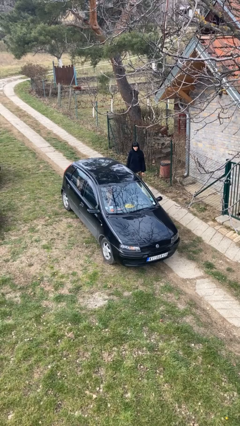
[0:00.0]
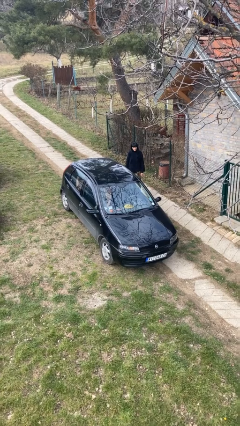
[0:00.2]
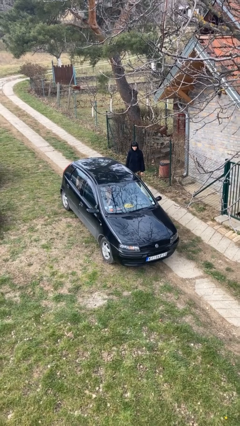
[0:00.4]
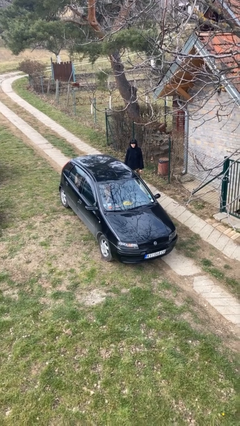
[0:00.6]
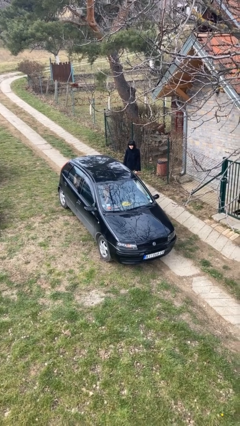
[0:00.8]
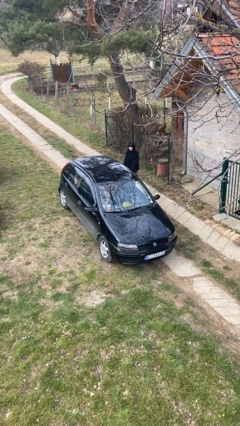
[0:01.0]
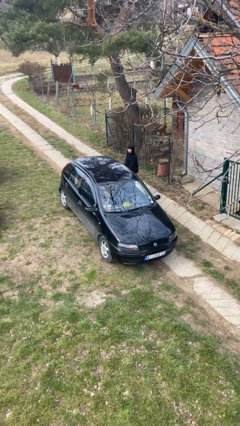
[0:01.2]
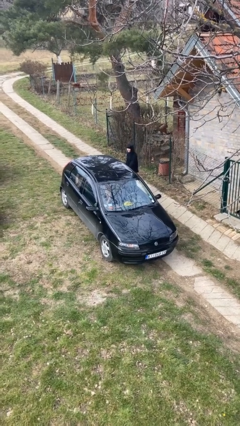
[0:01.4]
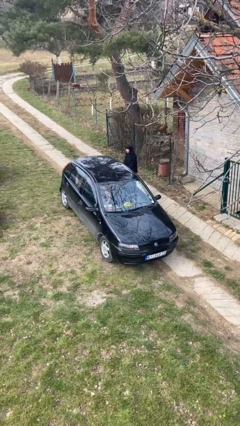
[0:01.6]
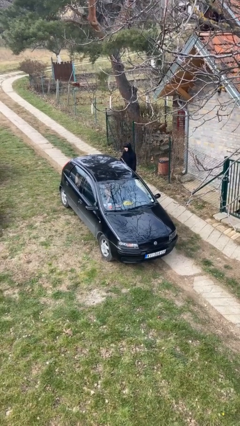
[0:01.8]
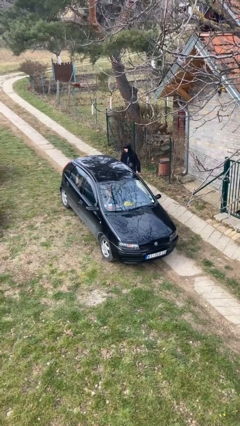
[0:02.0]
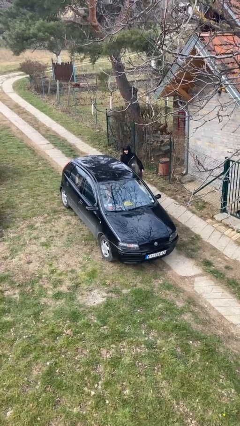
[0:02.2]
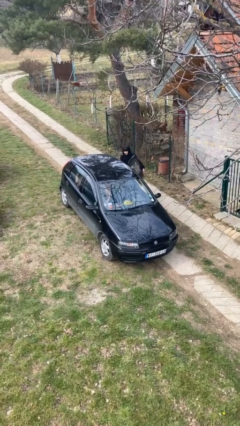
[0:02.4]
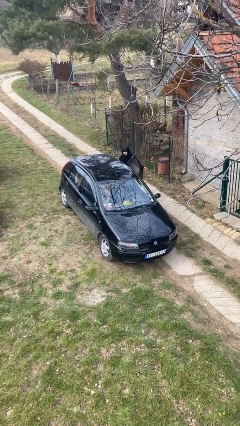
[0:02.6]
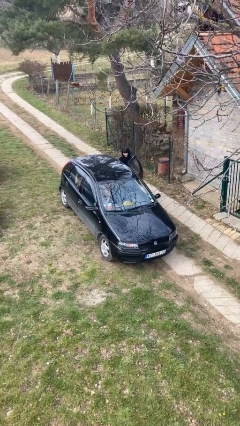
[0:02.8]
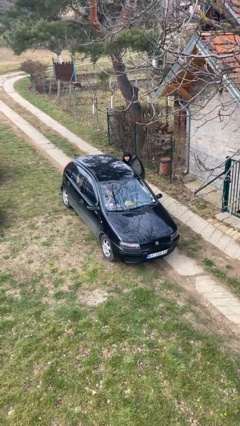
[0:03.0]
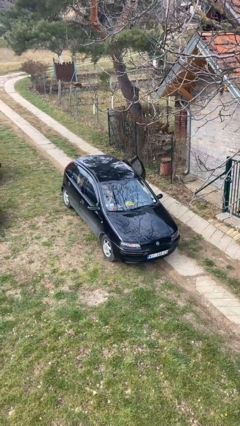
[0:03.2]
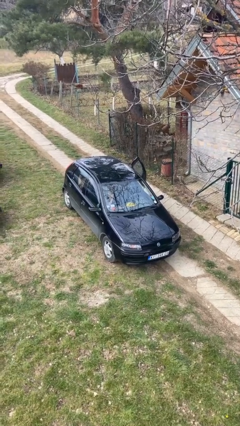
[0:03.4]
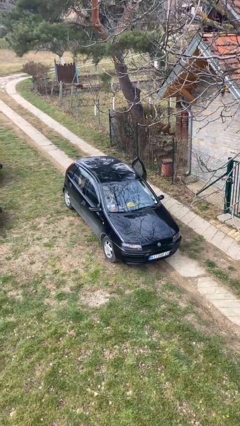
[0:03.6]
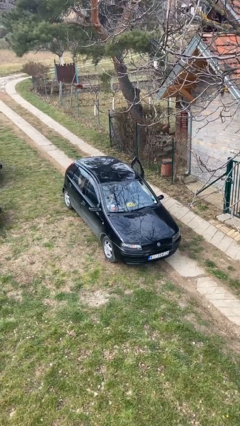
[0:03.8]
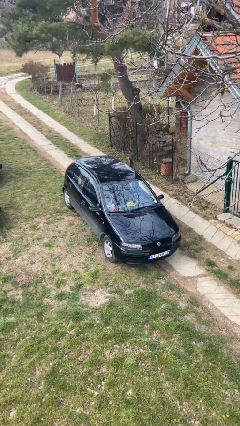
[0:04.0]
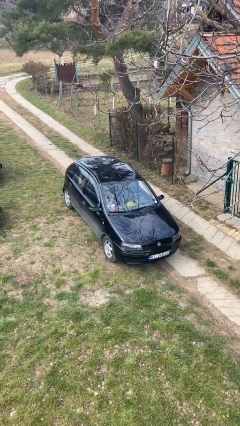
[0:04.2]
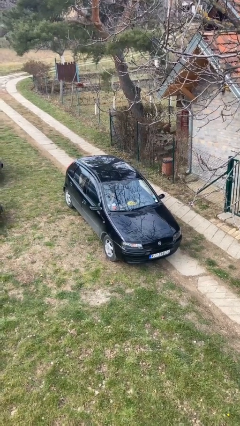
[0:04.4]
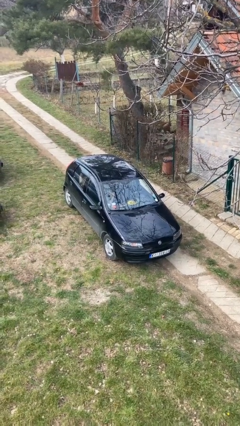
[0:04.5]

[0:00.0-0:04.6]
car picks up person

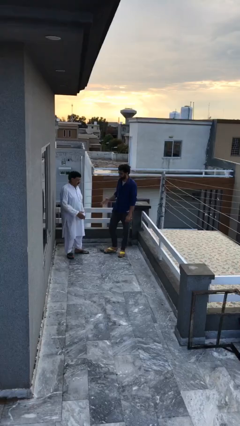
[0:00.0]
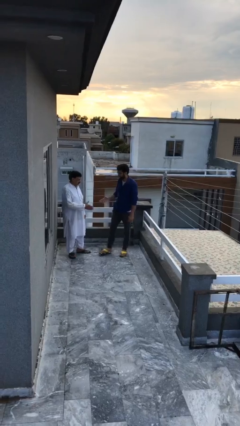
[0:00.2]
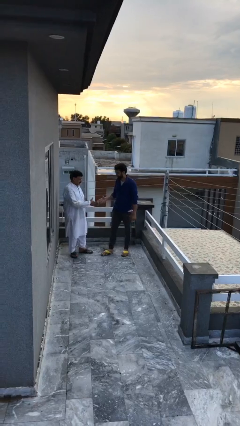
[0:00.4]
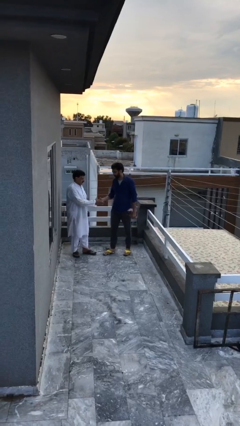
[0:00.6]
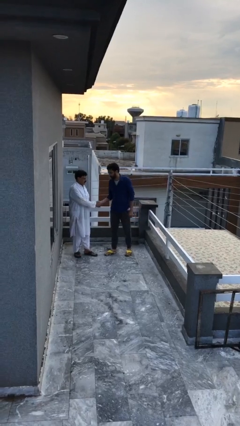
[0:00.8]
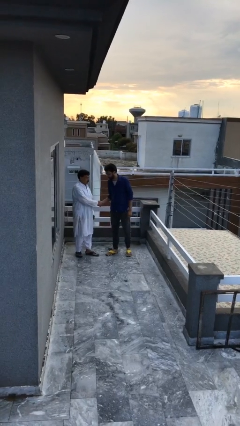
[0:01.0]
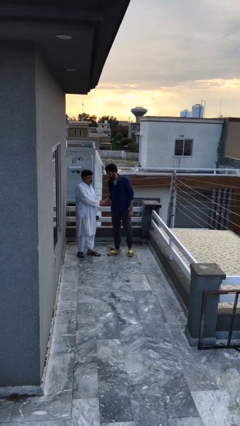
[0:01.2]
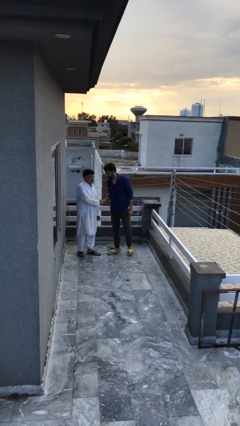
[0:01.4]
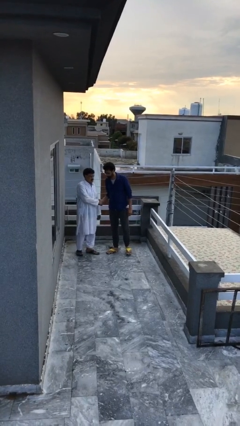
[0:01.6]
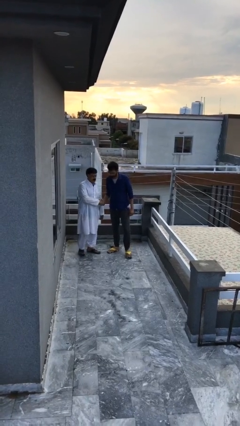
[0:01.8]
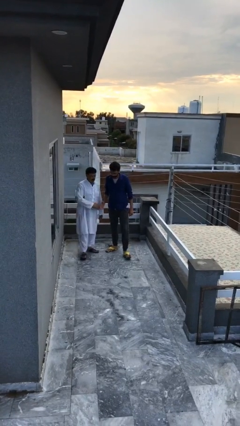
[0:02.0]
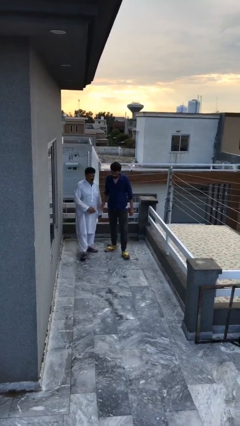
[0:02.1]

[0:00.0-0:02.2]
person shakes hand

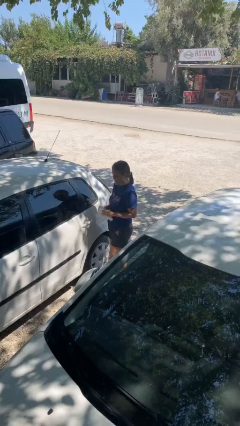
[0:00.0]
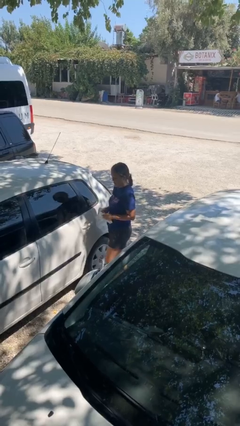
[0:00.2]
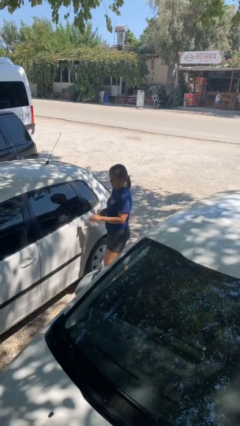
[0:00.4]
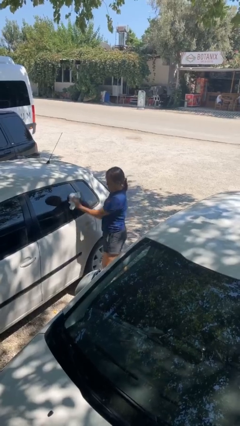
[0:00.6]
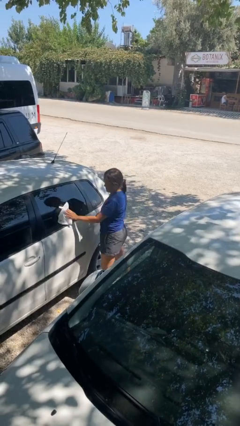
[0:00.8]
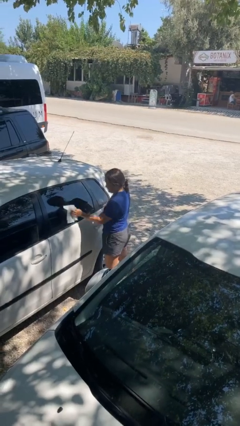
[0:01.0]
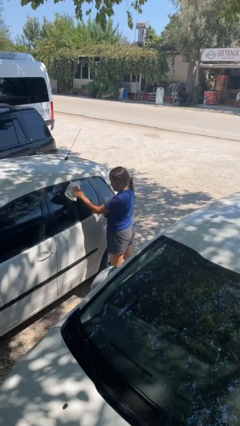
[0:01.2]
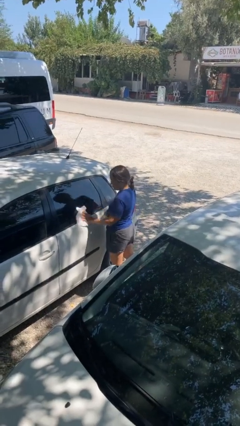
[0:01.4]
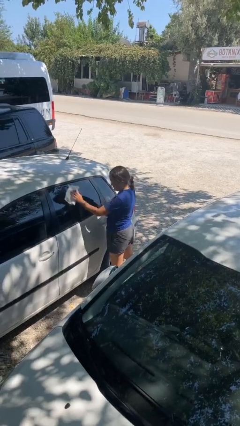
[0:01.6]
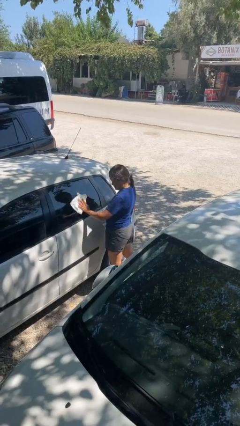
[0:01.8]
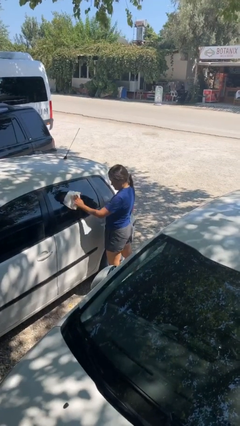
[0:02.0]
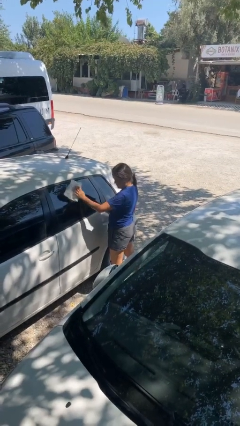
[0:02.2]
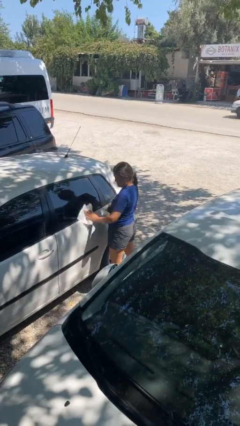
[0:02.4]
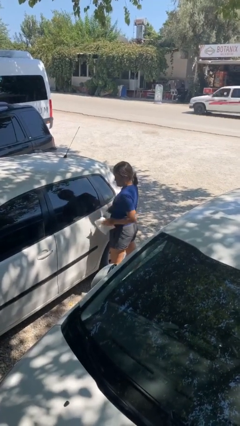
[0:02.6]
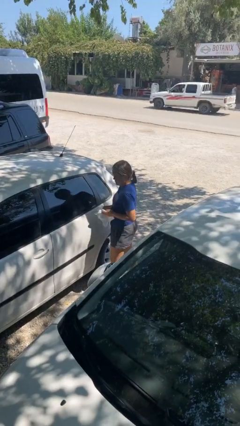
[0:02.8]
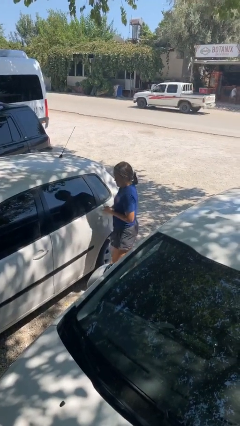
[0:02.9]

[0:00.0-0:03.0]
person polishes car with rag

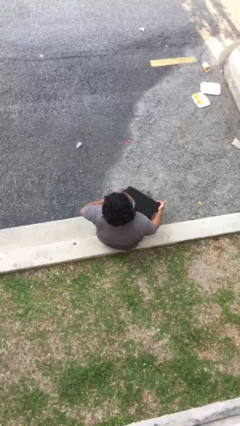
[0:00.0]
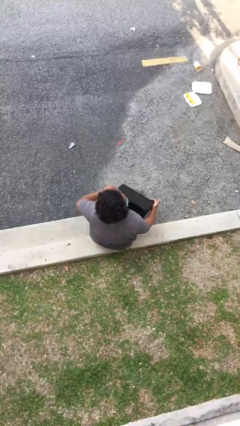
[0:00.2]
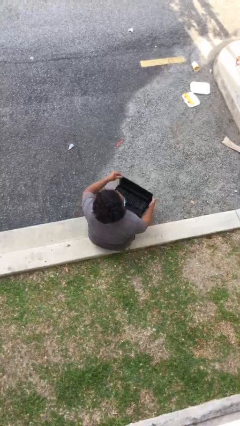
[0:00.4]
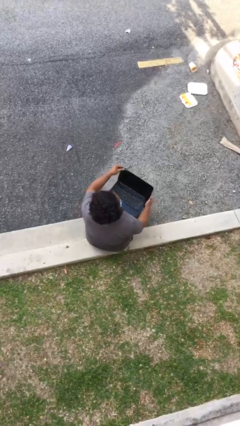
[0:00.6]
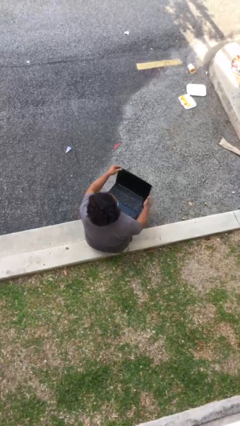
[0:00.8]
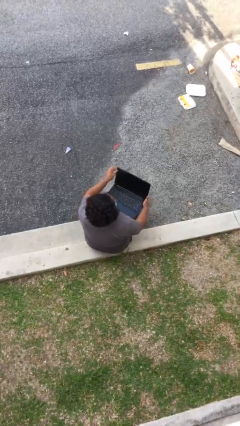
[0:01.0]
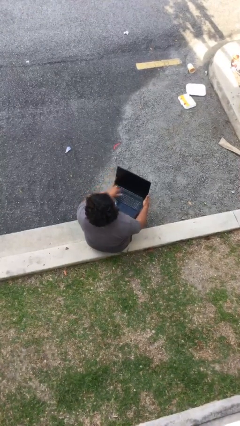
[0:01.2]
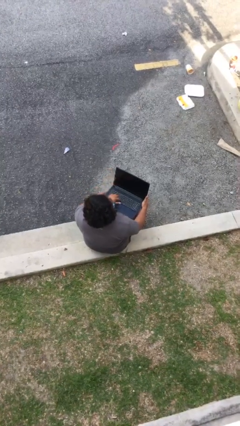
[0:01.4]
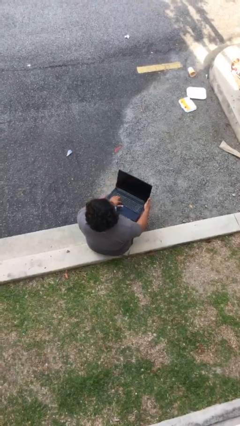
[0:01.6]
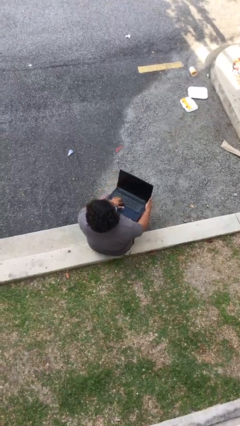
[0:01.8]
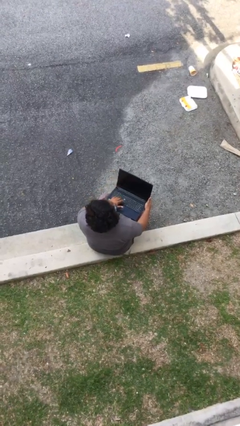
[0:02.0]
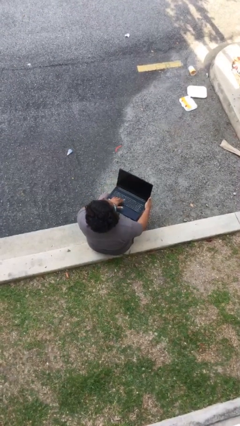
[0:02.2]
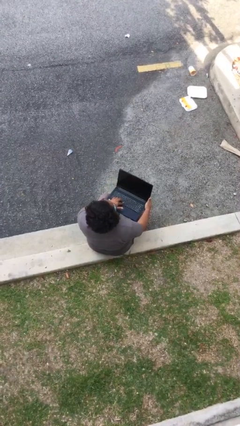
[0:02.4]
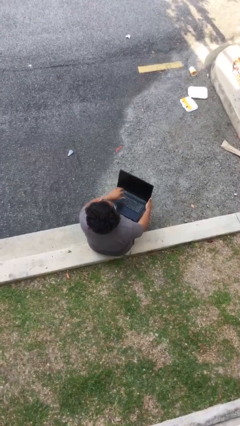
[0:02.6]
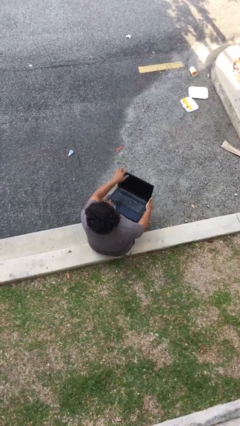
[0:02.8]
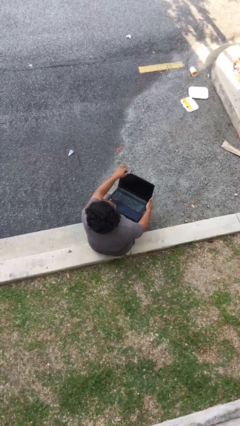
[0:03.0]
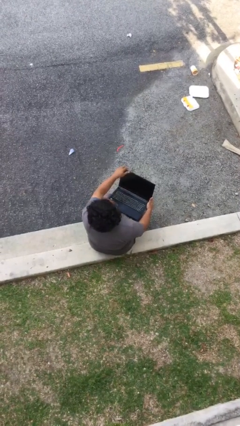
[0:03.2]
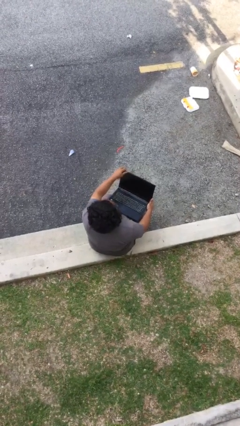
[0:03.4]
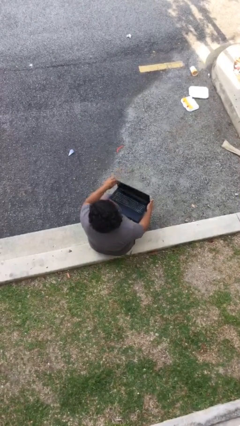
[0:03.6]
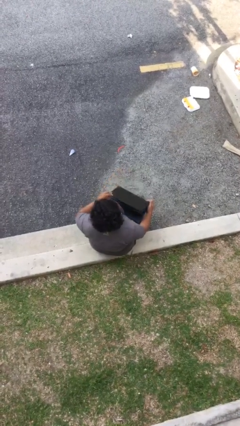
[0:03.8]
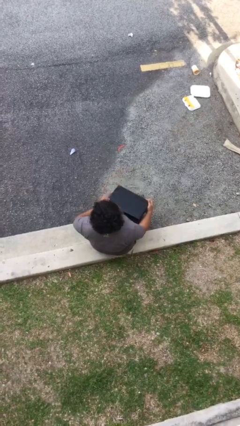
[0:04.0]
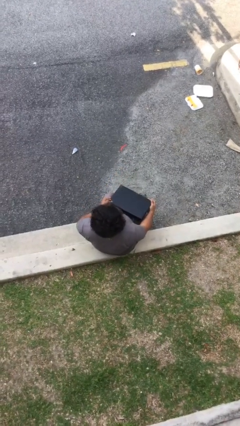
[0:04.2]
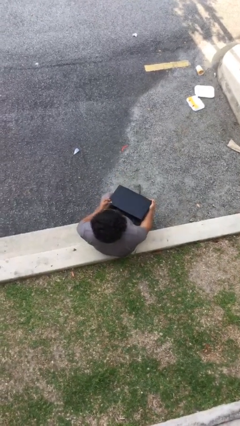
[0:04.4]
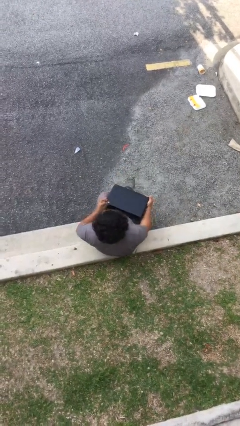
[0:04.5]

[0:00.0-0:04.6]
person interacts with laptop

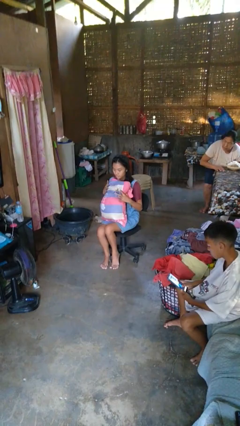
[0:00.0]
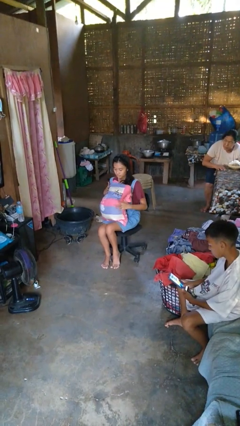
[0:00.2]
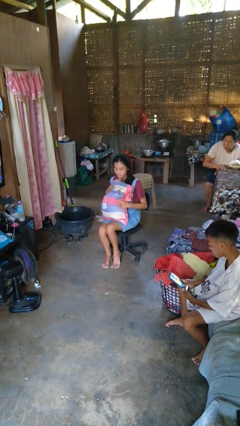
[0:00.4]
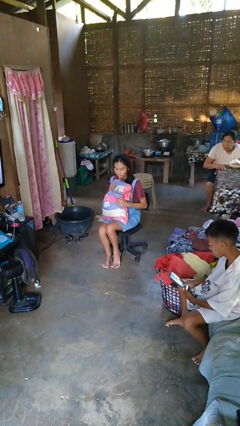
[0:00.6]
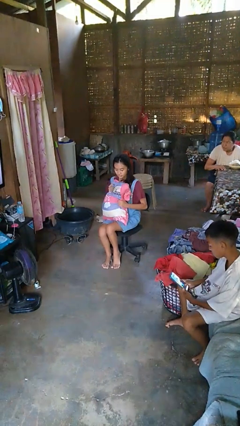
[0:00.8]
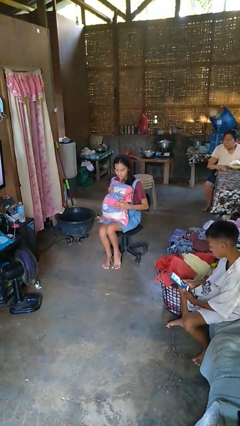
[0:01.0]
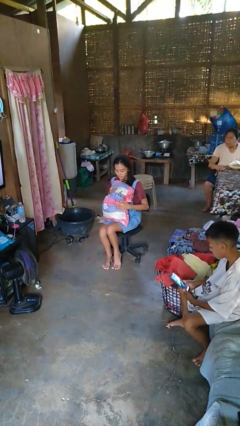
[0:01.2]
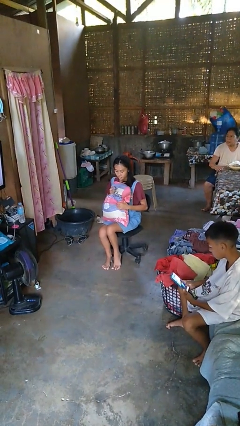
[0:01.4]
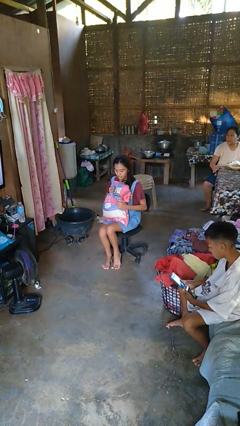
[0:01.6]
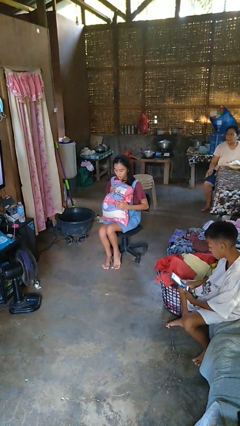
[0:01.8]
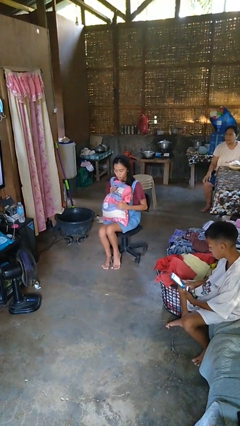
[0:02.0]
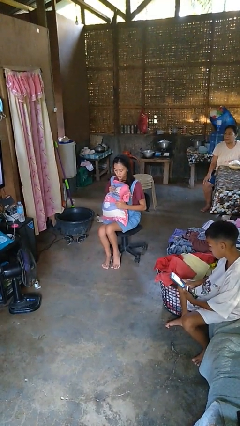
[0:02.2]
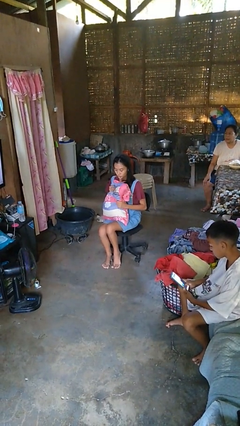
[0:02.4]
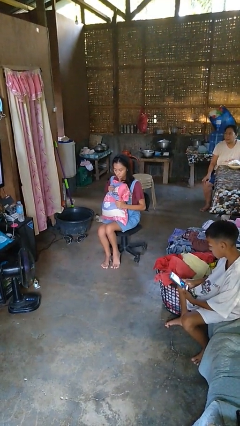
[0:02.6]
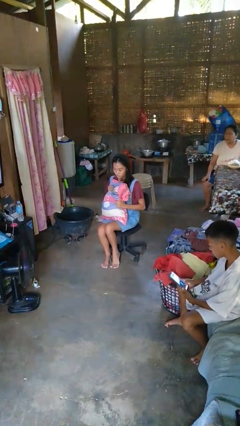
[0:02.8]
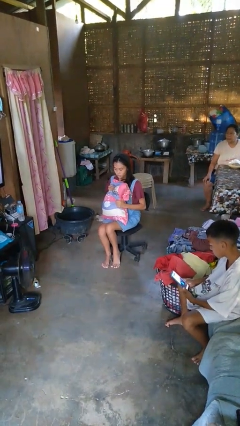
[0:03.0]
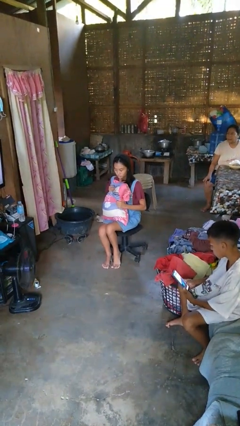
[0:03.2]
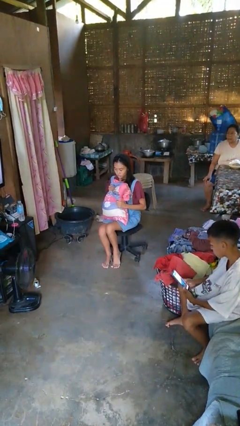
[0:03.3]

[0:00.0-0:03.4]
person squeezes object
